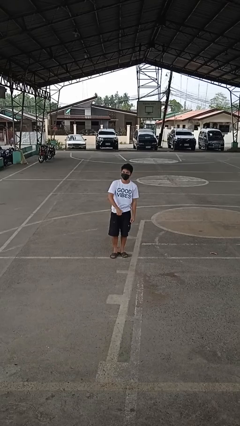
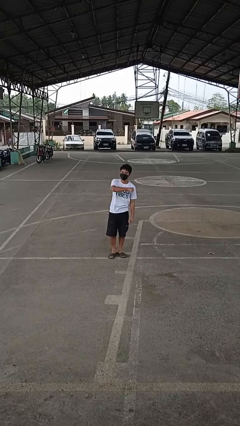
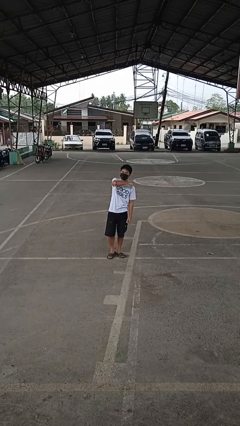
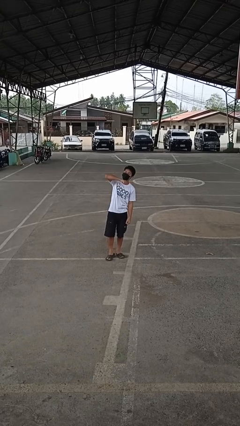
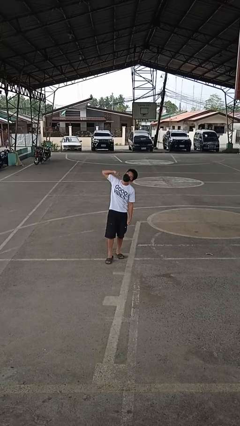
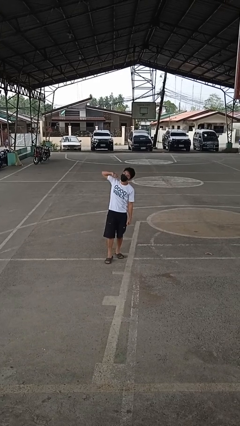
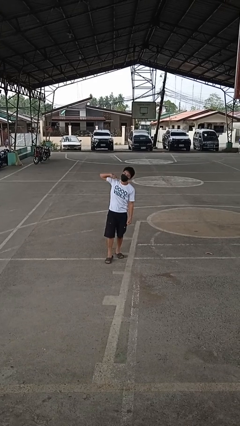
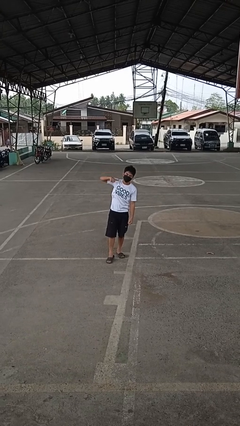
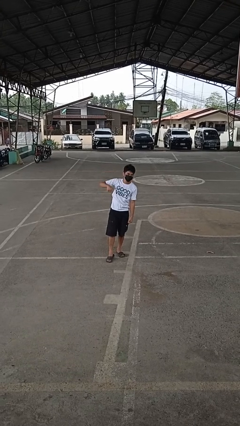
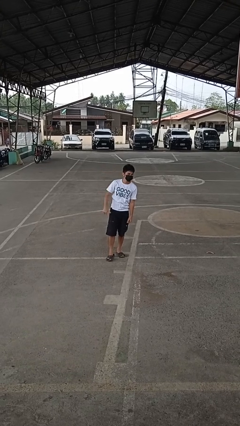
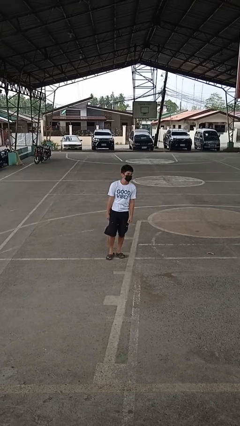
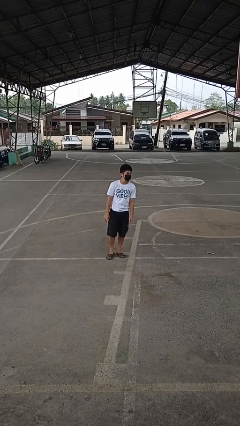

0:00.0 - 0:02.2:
person gestures cut

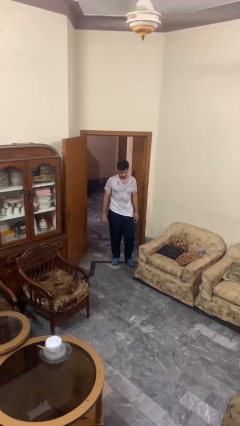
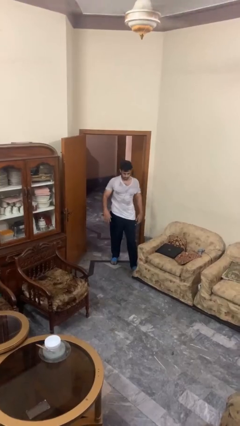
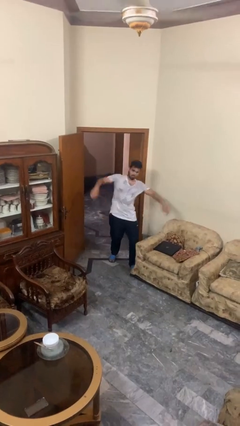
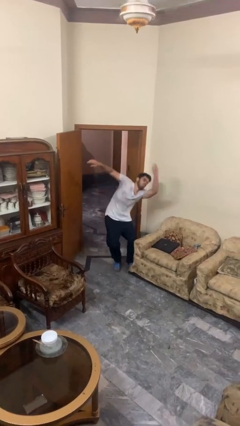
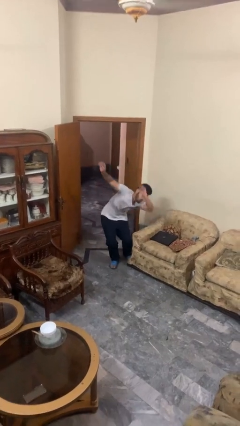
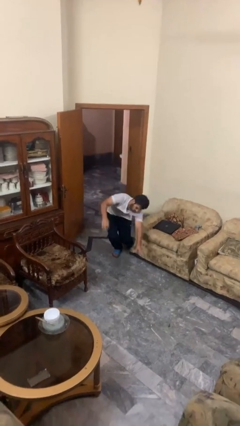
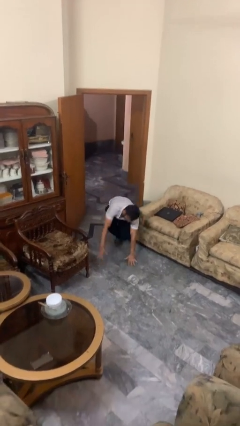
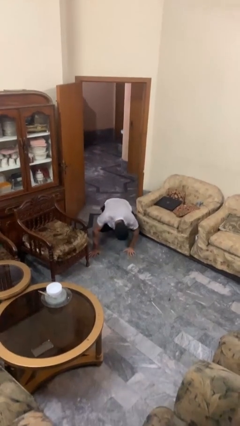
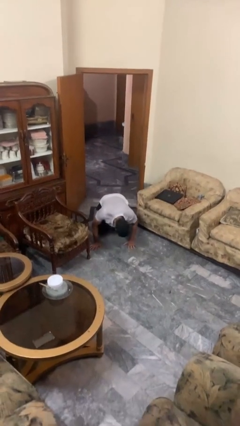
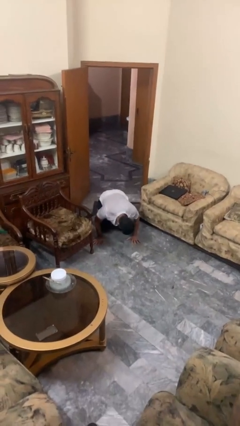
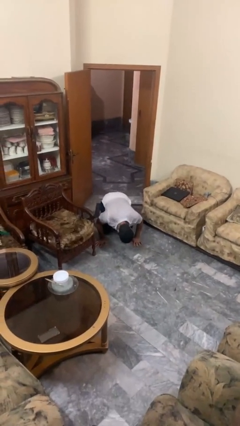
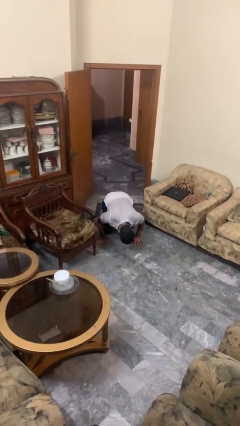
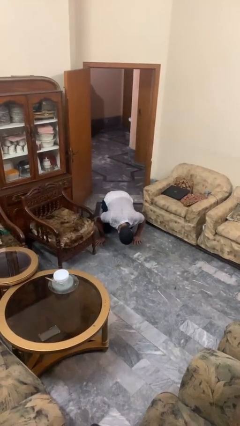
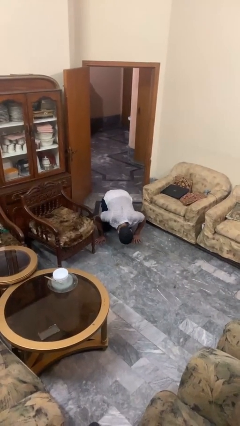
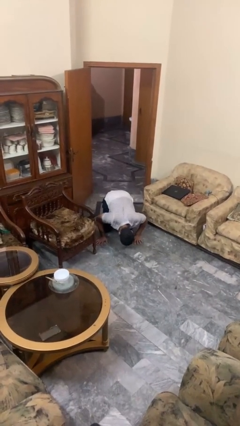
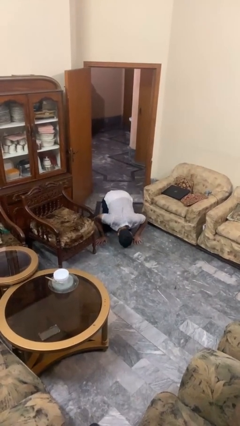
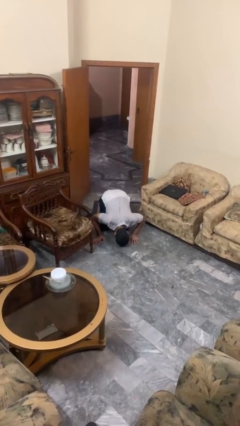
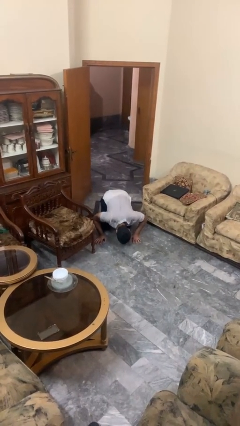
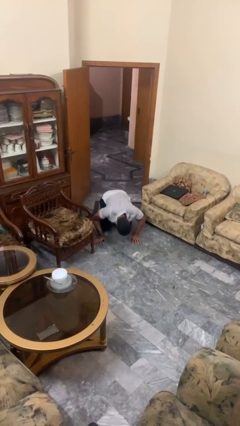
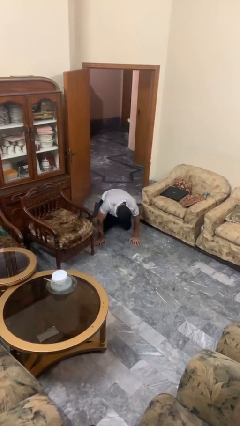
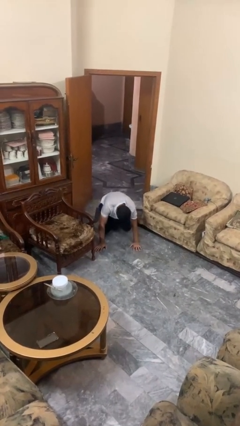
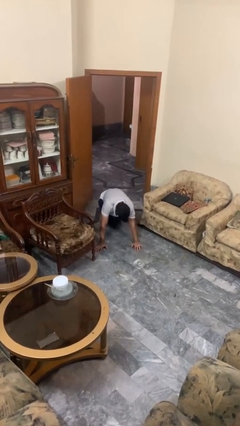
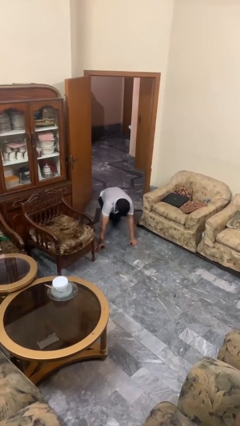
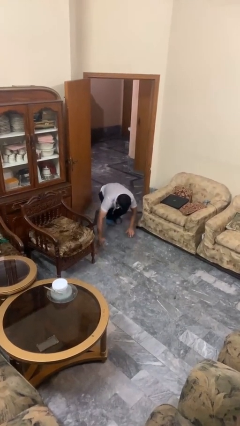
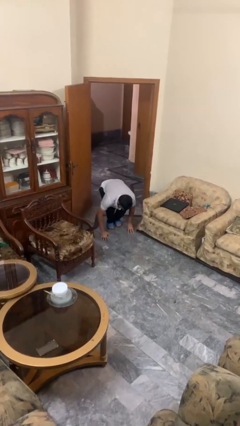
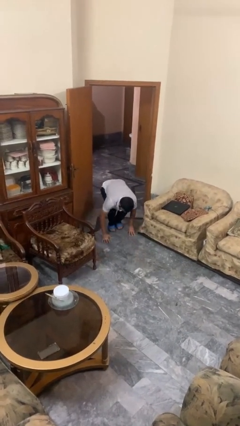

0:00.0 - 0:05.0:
person trips on object on floor

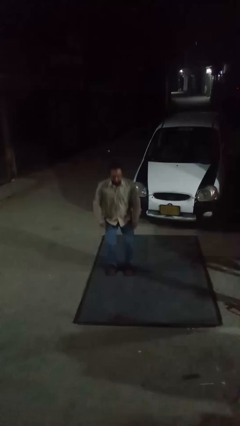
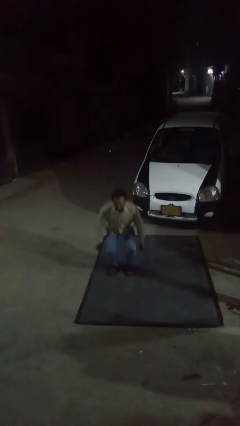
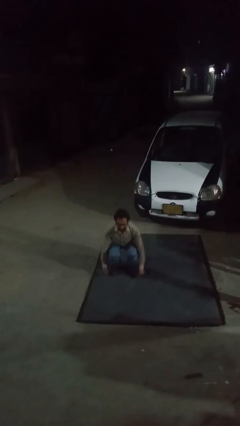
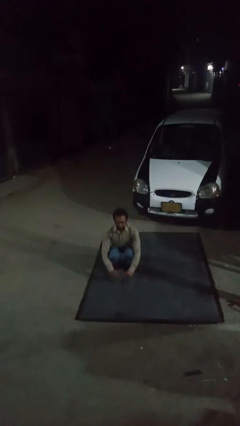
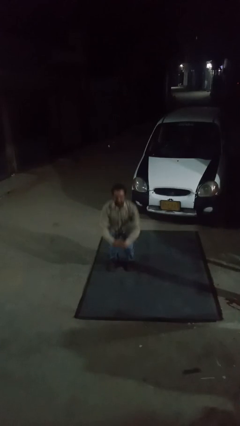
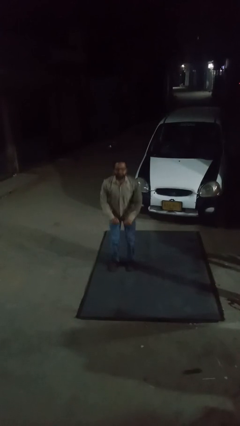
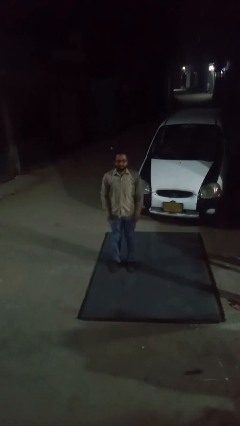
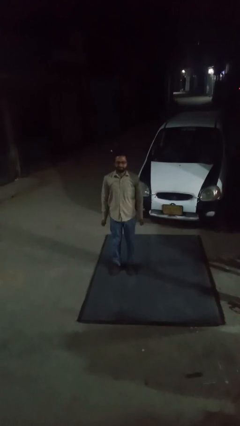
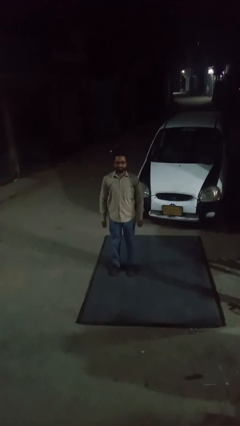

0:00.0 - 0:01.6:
person exercises with situp

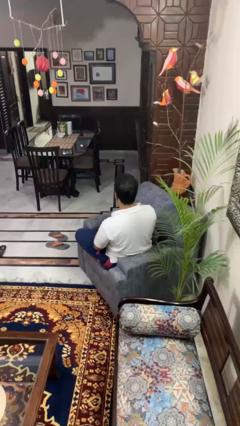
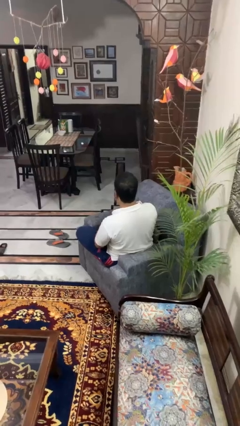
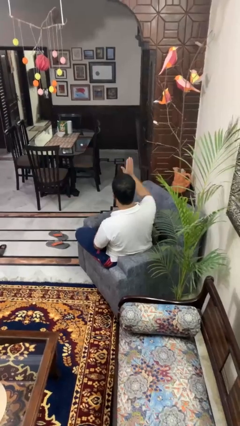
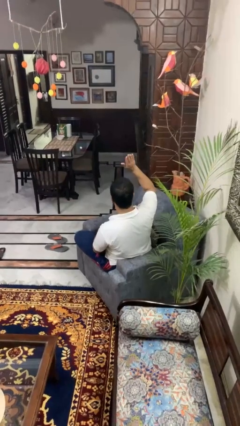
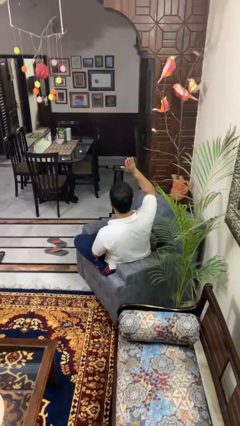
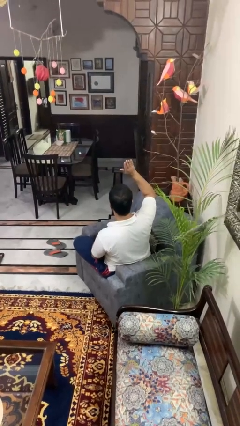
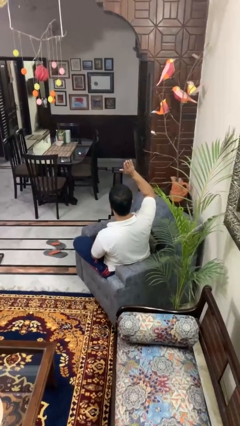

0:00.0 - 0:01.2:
person gestures raise hand

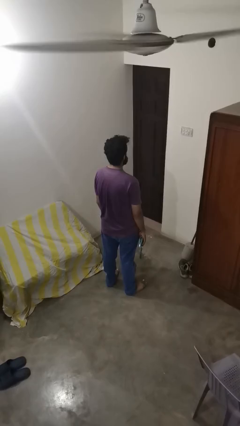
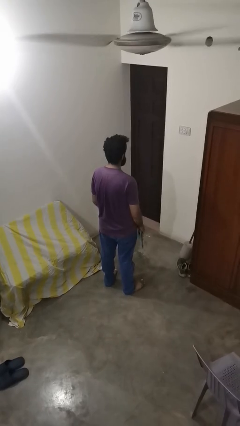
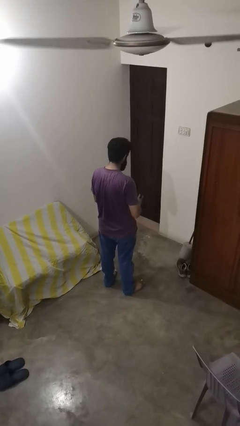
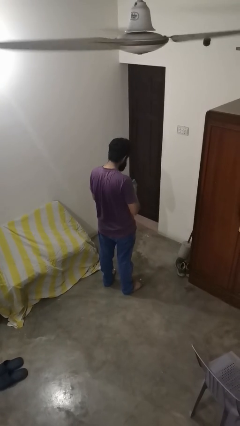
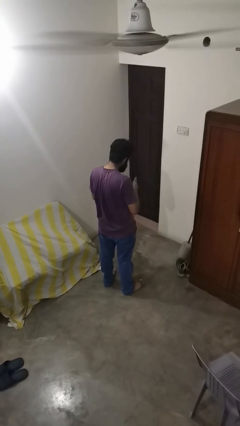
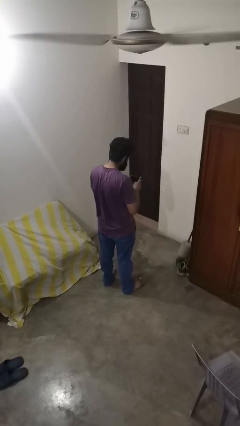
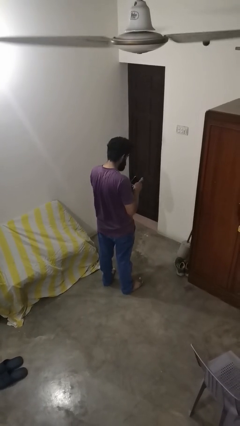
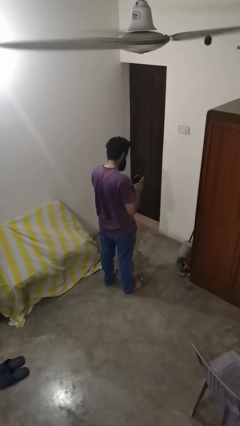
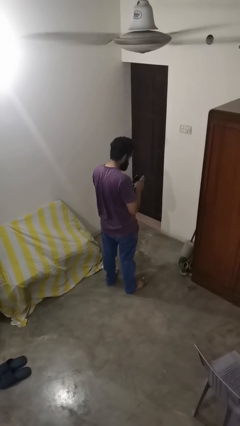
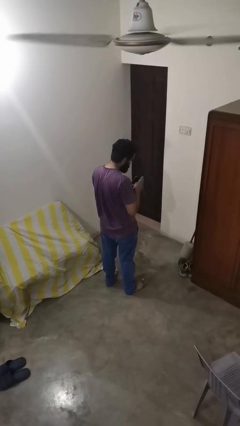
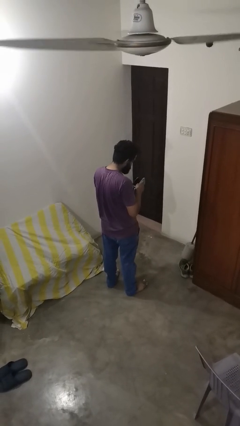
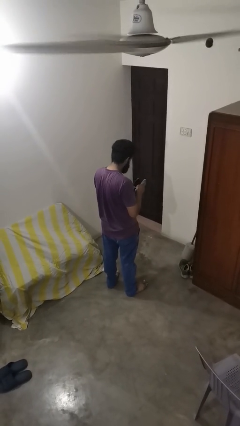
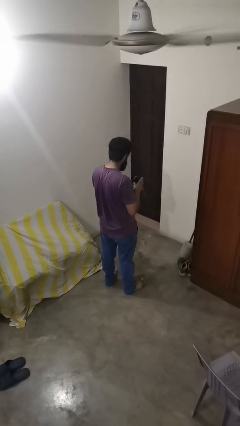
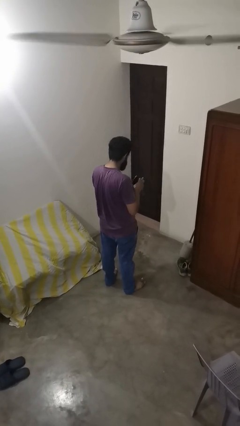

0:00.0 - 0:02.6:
person searches in purse

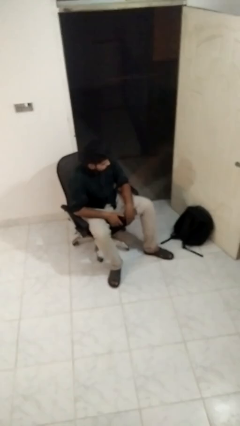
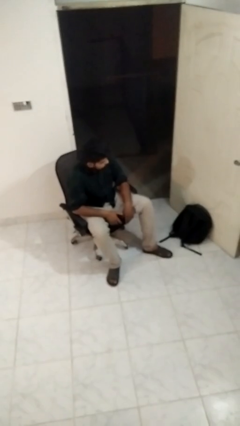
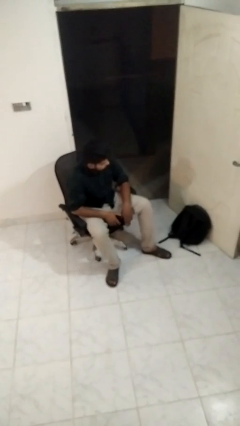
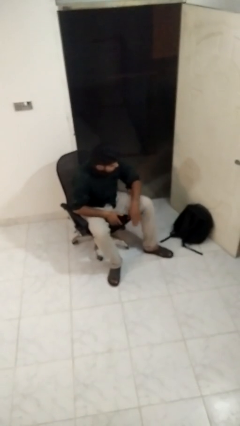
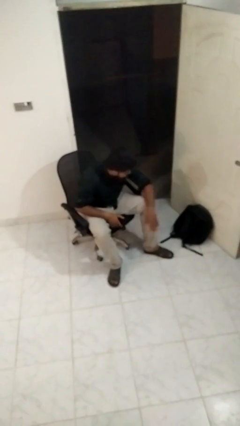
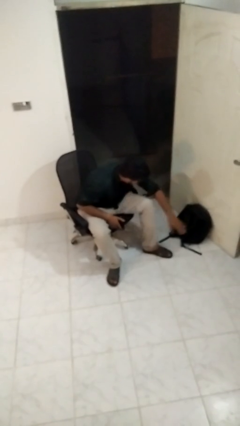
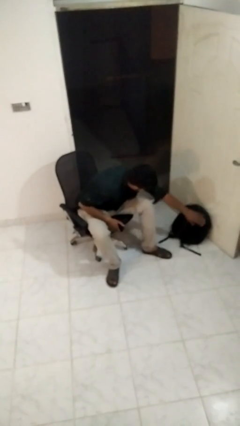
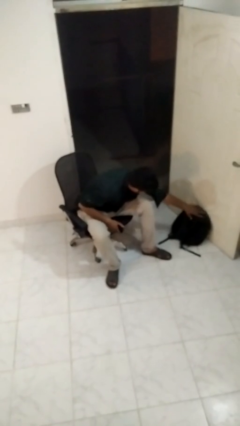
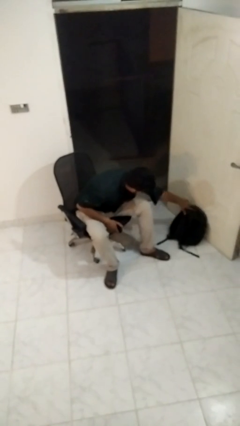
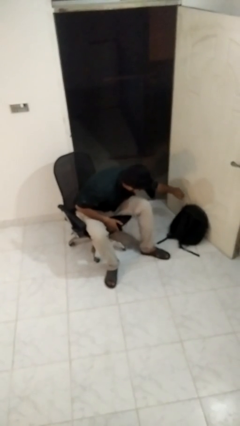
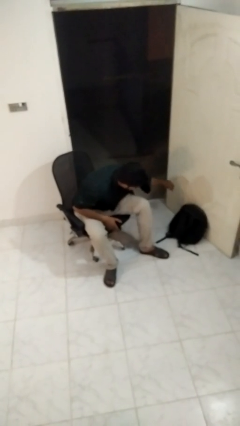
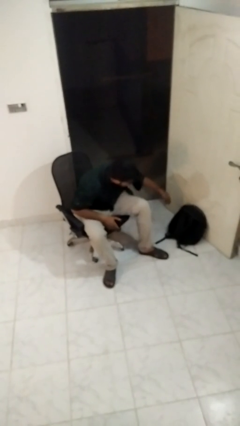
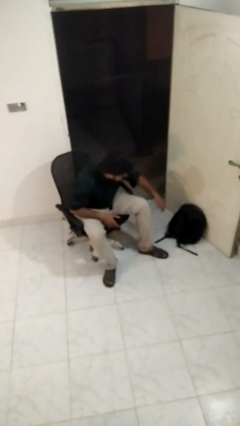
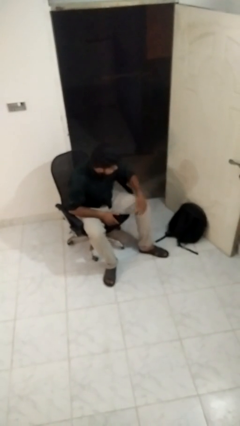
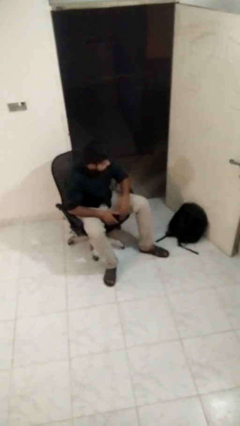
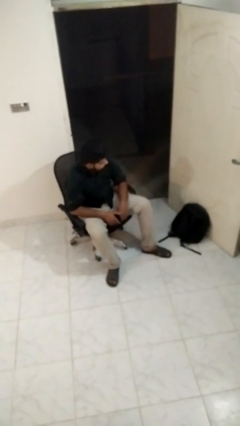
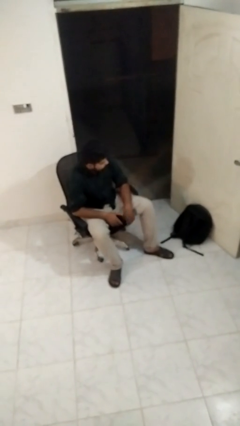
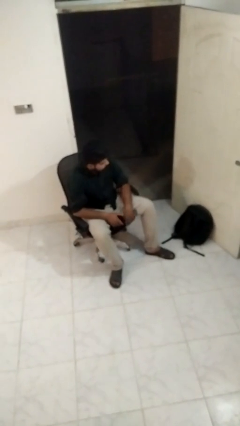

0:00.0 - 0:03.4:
person waves hand over object

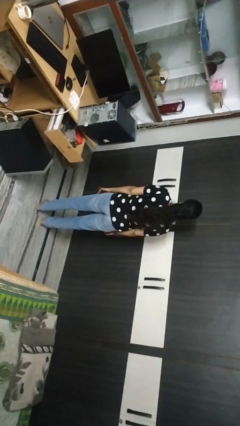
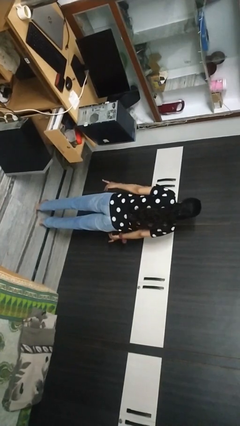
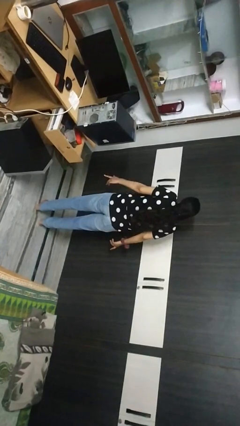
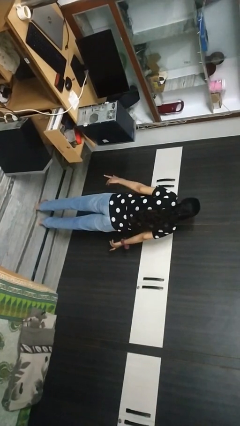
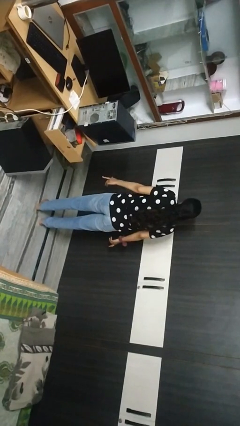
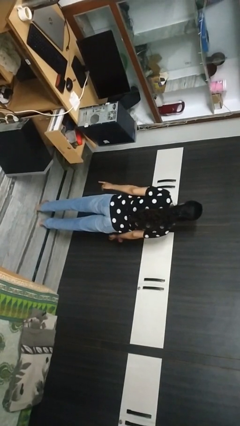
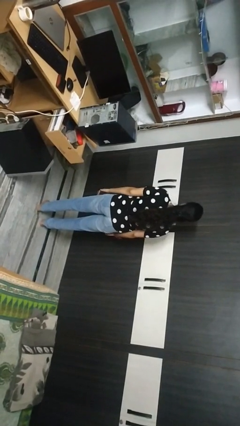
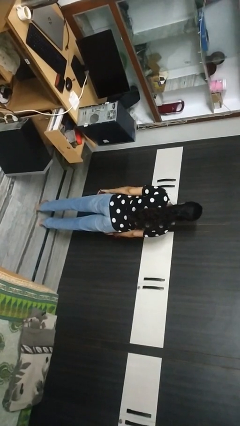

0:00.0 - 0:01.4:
person shrugs
